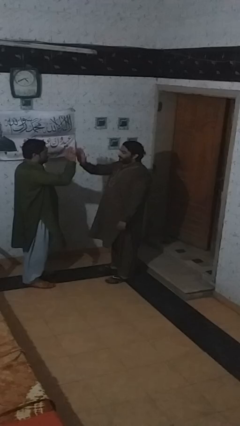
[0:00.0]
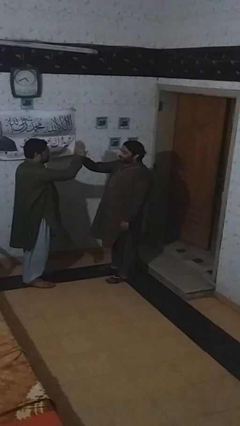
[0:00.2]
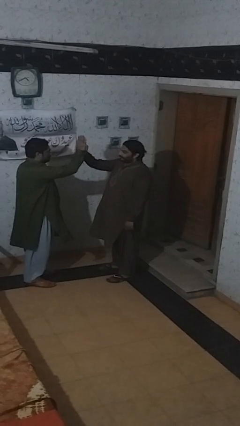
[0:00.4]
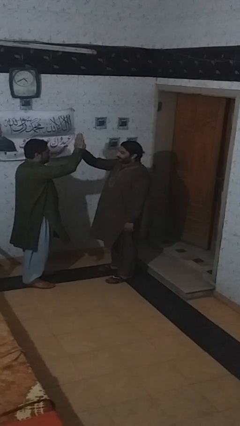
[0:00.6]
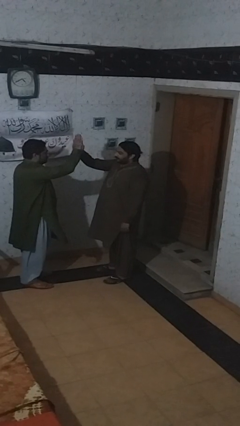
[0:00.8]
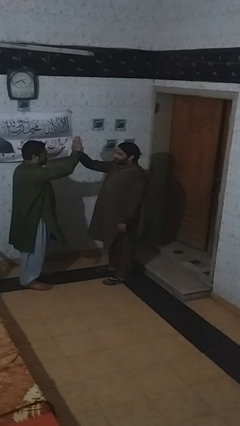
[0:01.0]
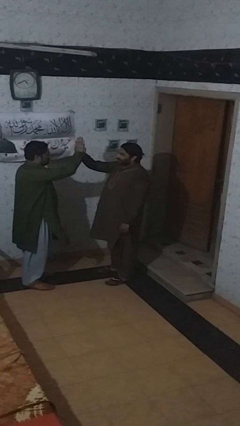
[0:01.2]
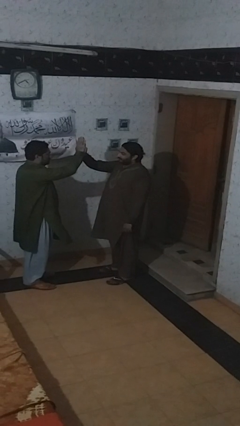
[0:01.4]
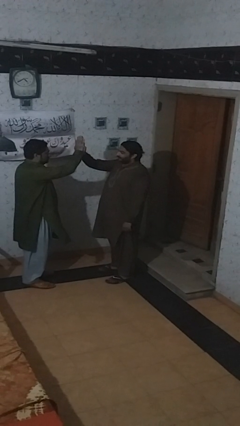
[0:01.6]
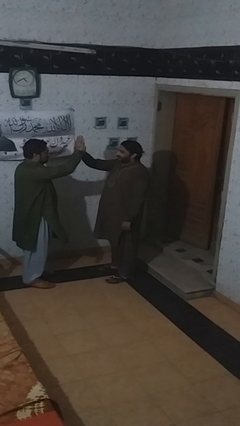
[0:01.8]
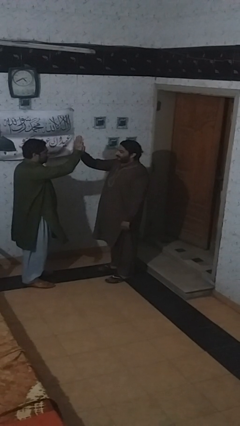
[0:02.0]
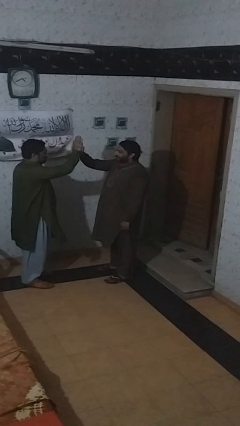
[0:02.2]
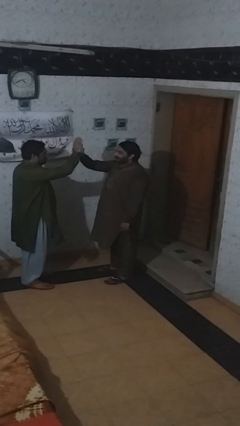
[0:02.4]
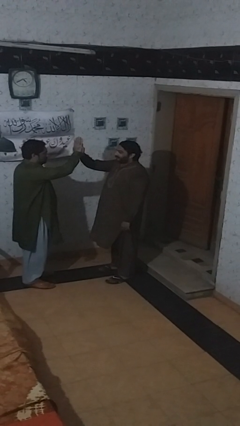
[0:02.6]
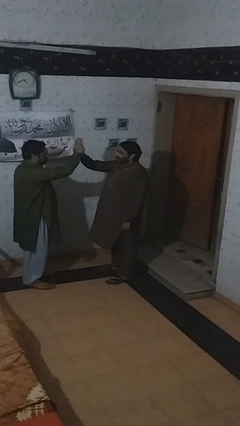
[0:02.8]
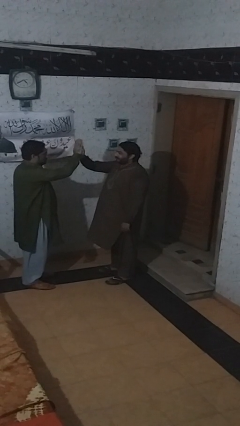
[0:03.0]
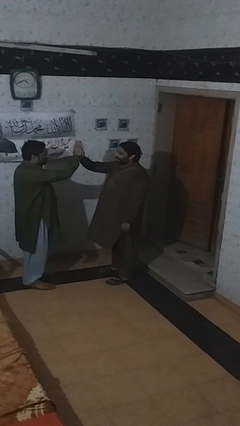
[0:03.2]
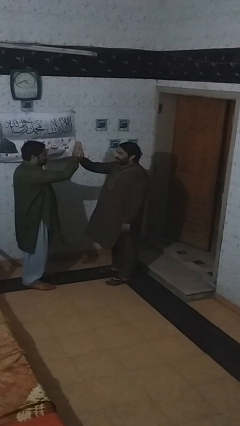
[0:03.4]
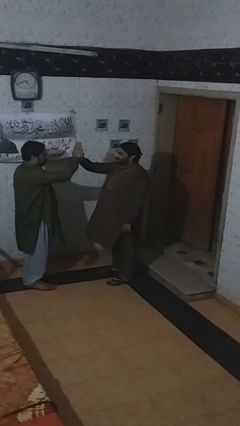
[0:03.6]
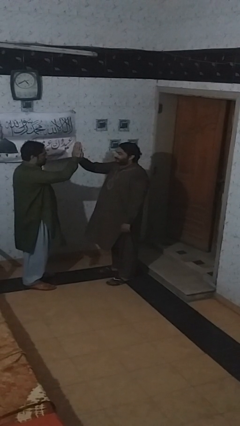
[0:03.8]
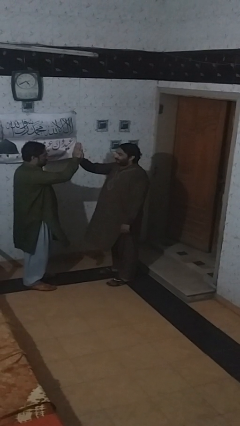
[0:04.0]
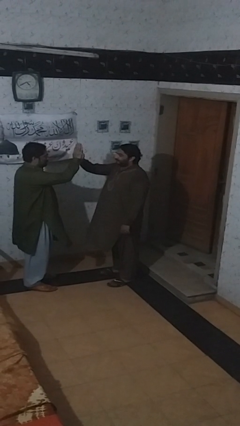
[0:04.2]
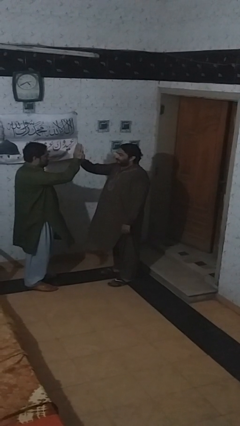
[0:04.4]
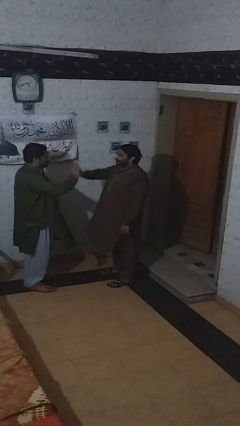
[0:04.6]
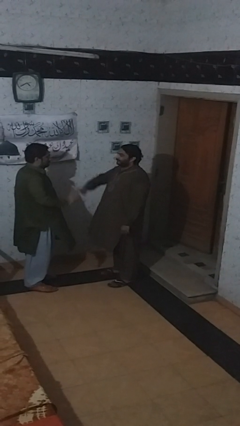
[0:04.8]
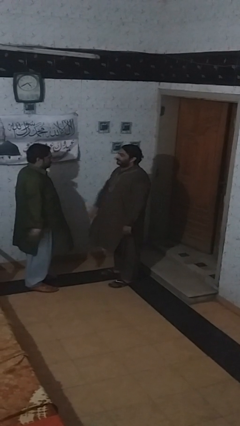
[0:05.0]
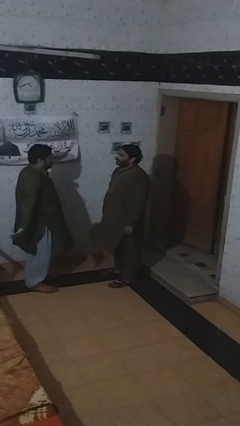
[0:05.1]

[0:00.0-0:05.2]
person highfives hand

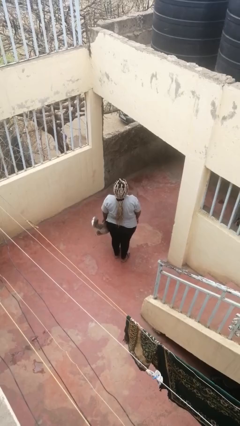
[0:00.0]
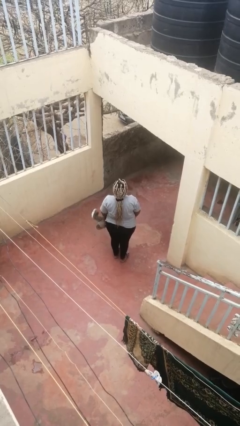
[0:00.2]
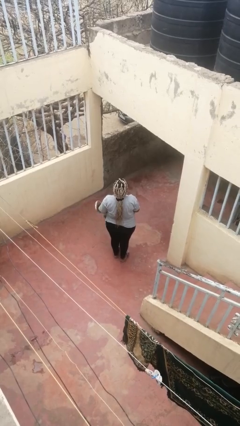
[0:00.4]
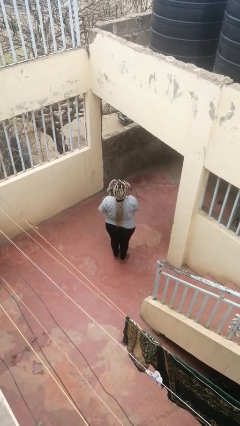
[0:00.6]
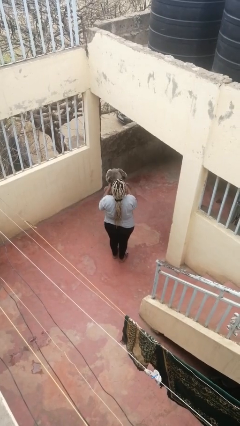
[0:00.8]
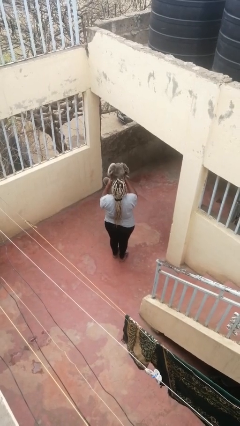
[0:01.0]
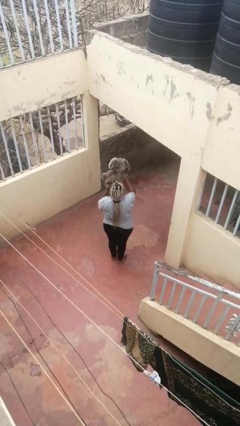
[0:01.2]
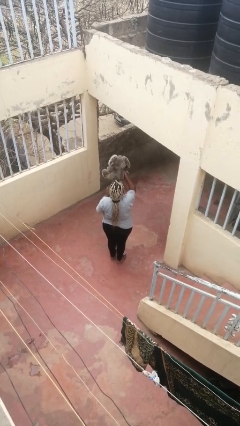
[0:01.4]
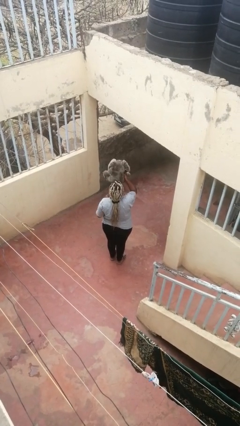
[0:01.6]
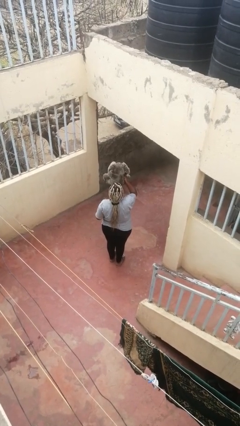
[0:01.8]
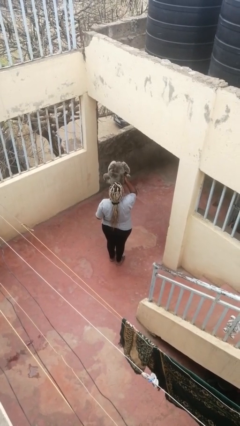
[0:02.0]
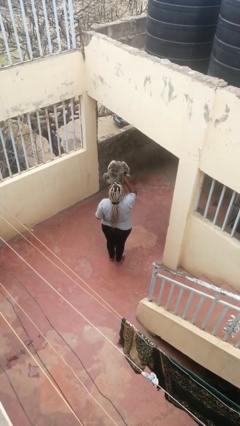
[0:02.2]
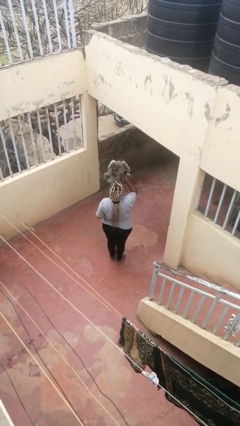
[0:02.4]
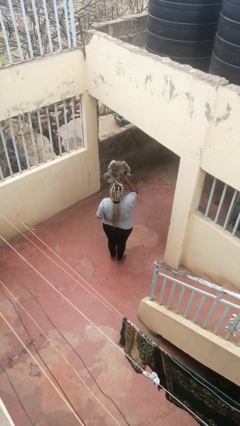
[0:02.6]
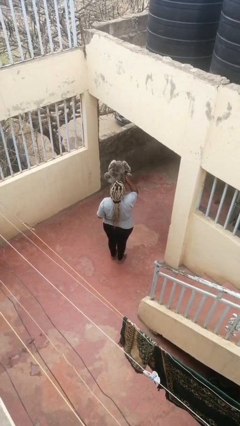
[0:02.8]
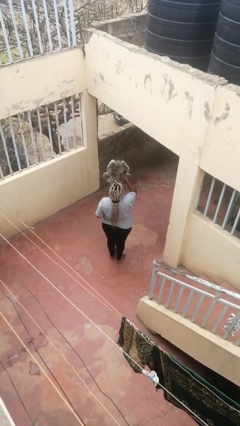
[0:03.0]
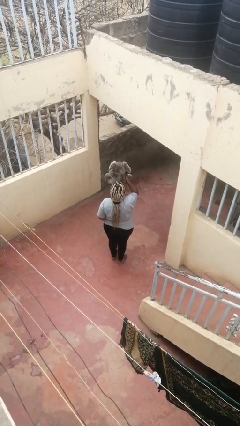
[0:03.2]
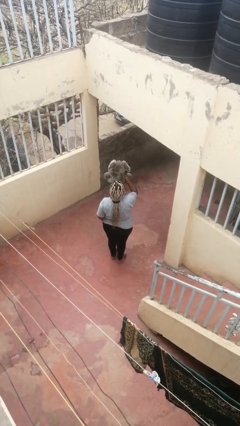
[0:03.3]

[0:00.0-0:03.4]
person holds object above head

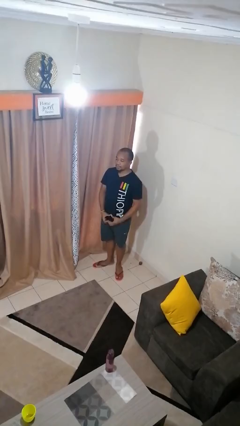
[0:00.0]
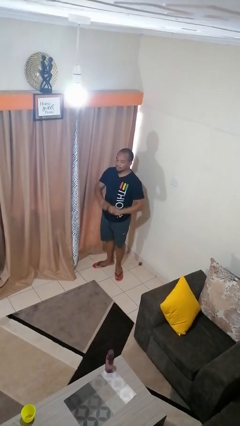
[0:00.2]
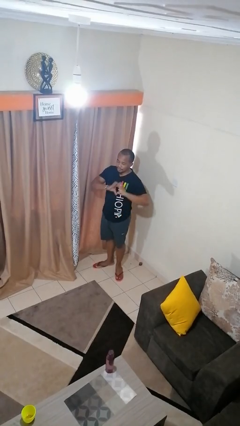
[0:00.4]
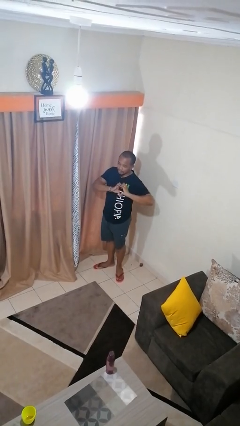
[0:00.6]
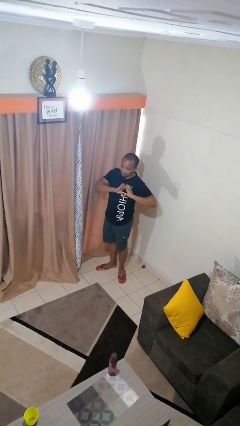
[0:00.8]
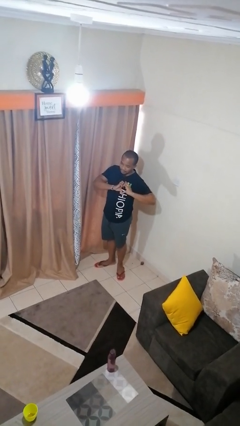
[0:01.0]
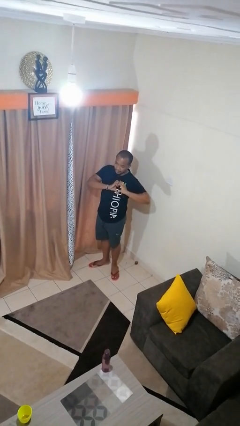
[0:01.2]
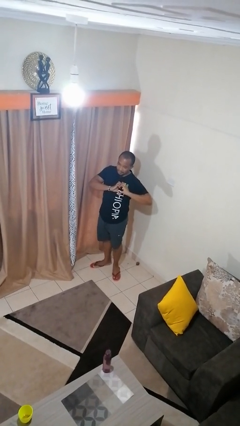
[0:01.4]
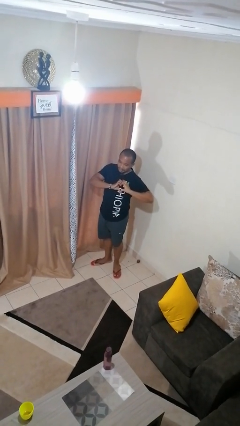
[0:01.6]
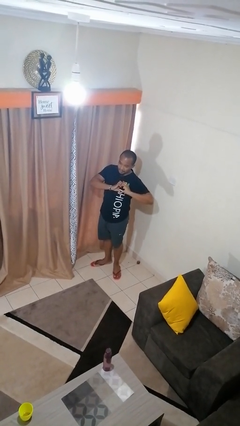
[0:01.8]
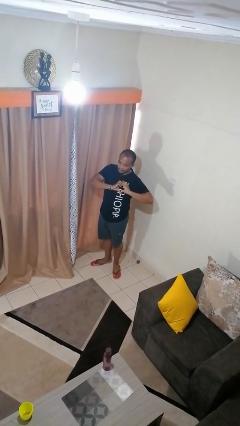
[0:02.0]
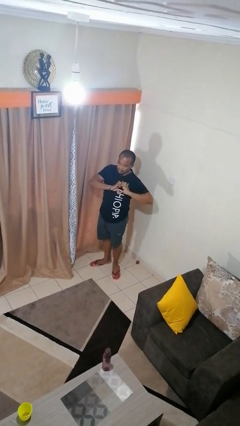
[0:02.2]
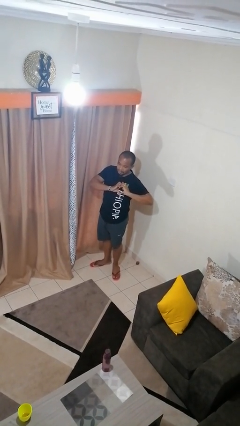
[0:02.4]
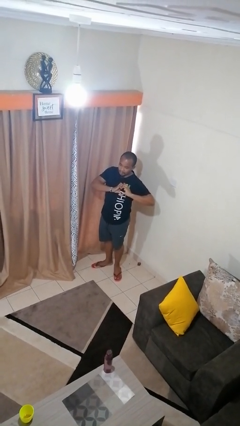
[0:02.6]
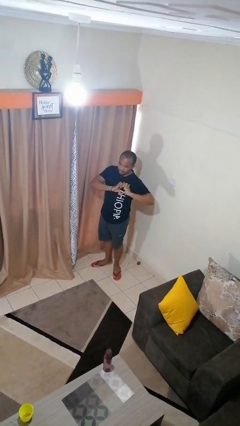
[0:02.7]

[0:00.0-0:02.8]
person gestures heart

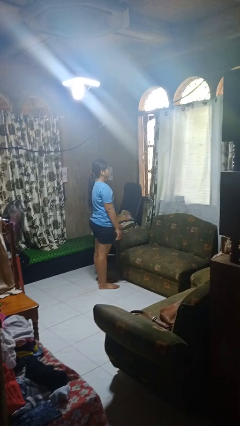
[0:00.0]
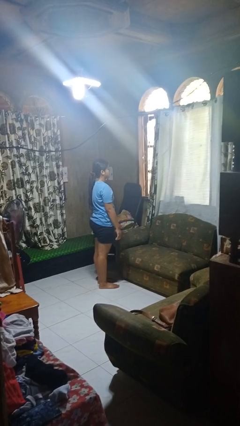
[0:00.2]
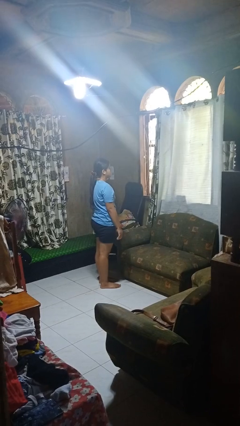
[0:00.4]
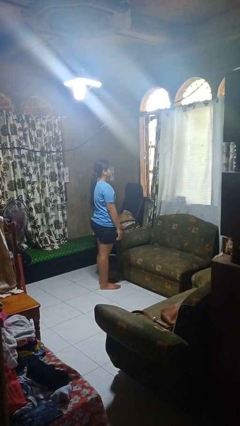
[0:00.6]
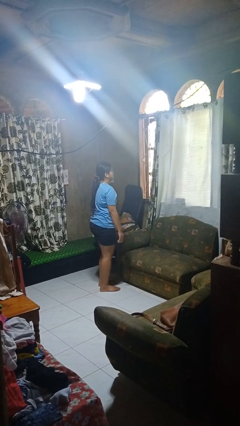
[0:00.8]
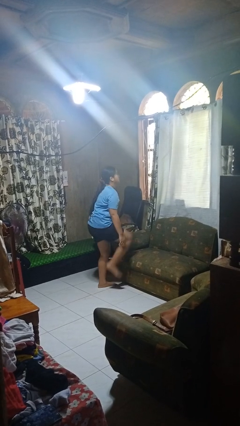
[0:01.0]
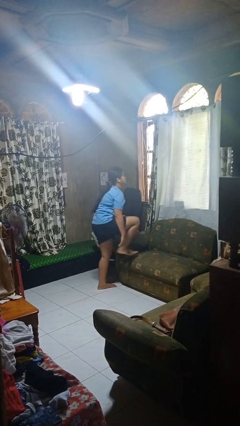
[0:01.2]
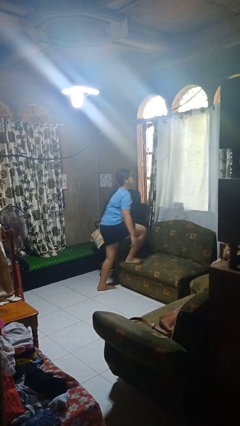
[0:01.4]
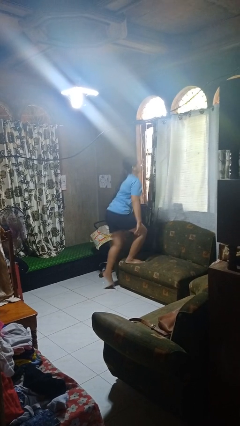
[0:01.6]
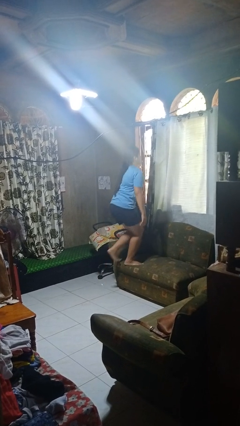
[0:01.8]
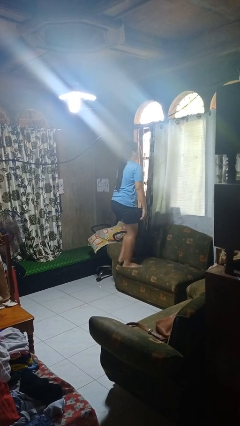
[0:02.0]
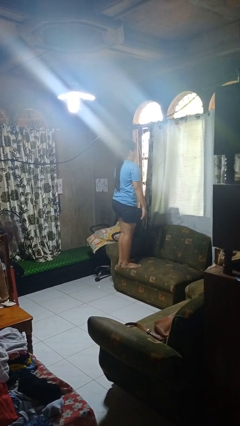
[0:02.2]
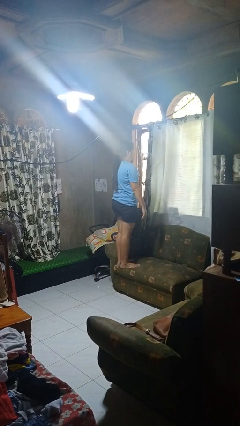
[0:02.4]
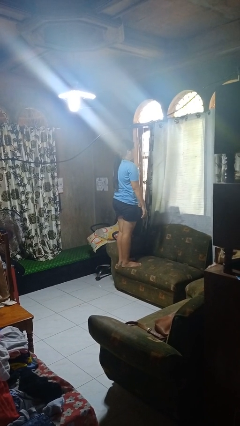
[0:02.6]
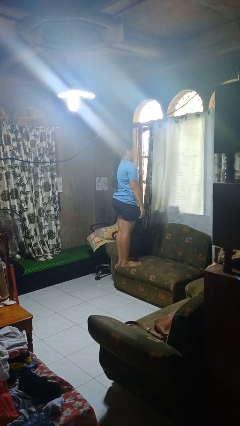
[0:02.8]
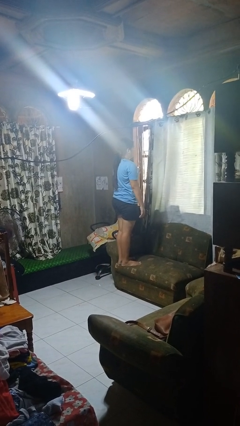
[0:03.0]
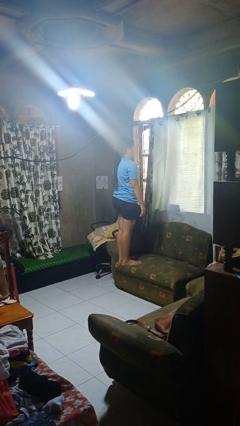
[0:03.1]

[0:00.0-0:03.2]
person climbs on couch

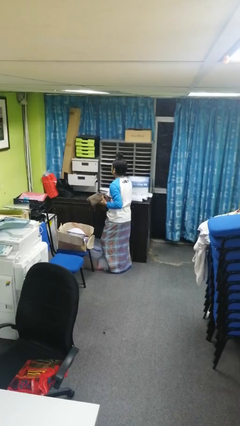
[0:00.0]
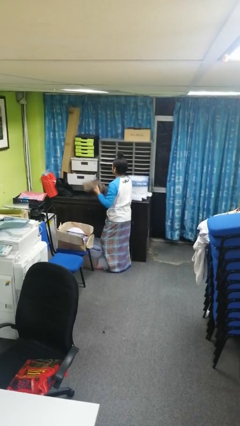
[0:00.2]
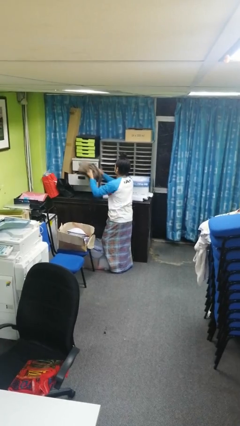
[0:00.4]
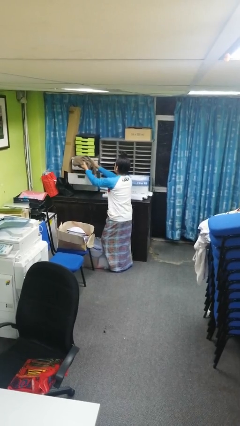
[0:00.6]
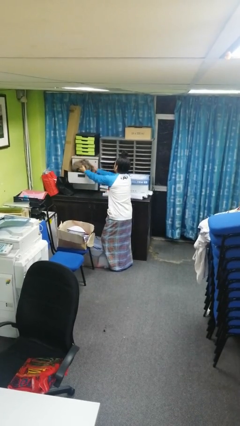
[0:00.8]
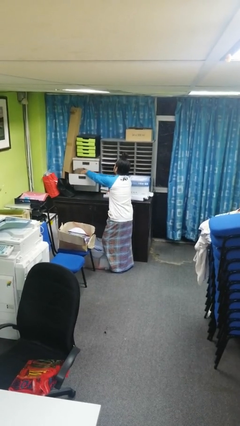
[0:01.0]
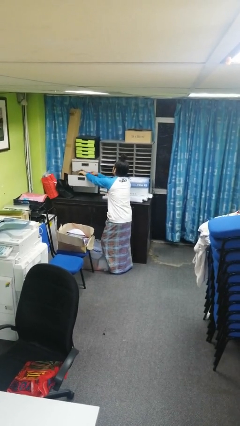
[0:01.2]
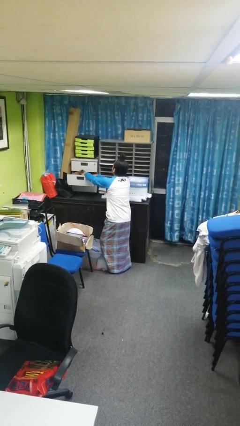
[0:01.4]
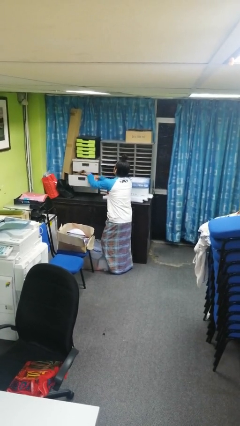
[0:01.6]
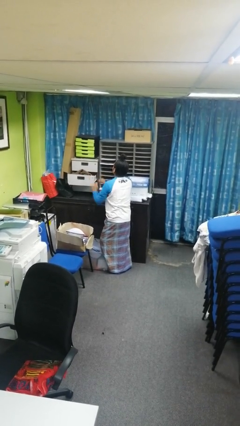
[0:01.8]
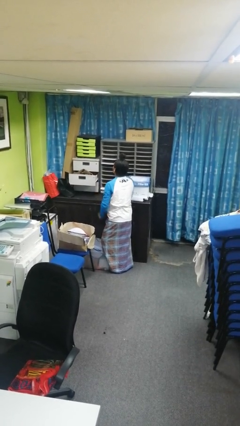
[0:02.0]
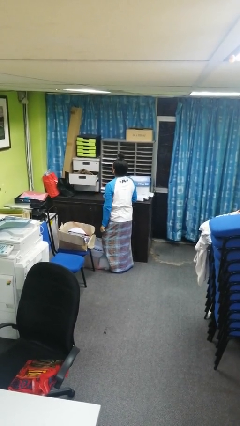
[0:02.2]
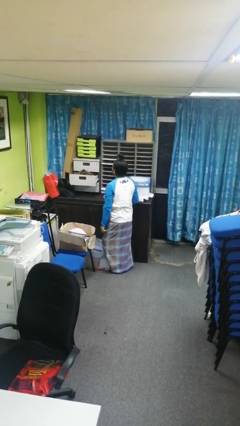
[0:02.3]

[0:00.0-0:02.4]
person puts clothes into dresser

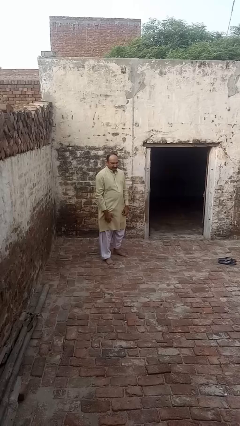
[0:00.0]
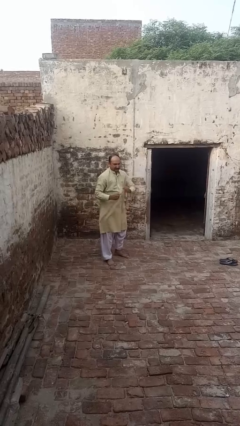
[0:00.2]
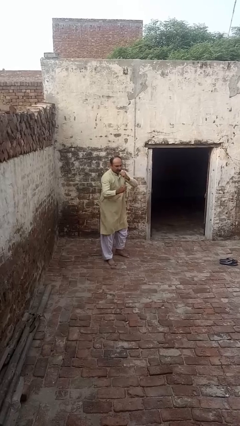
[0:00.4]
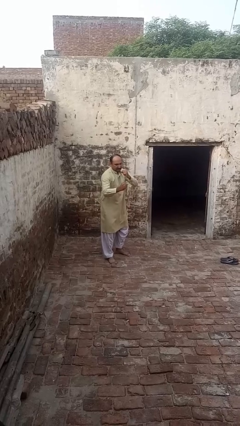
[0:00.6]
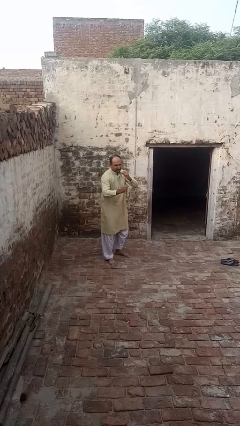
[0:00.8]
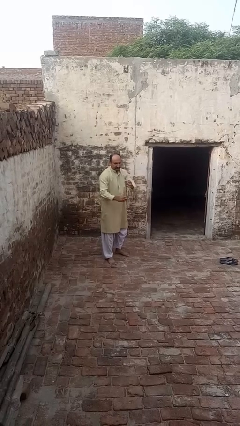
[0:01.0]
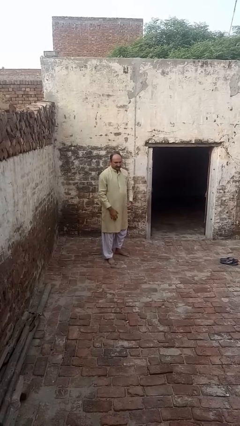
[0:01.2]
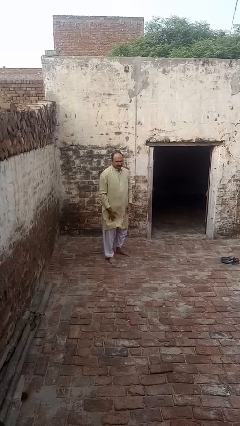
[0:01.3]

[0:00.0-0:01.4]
person karate chop
